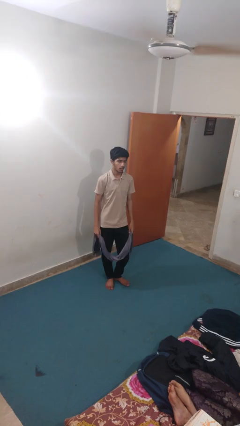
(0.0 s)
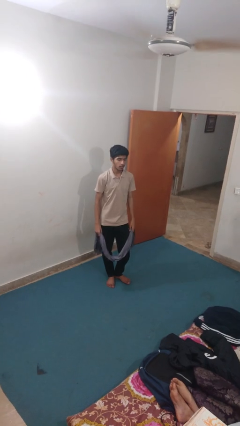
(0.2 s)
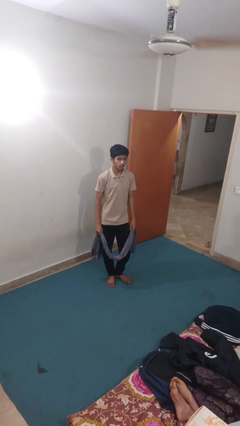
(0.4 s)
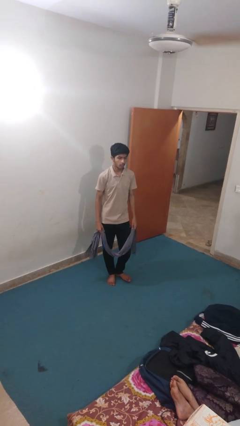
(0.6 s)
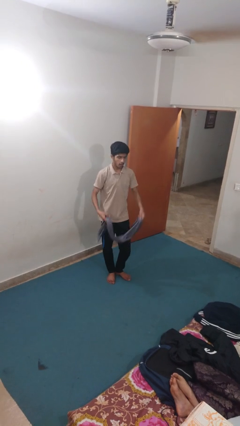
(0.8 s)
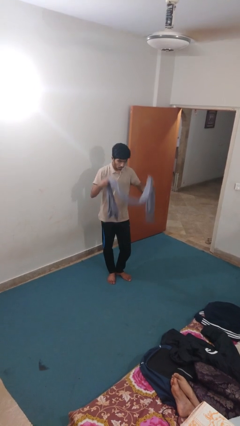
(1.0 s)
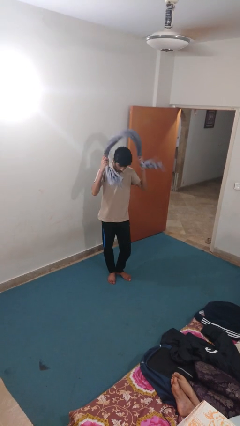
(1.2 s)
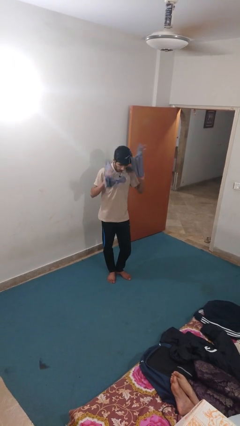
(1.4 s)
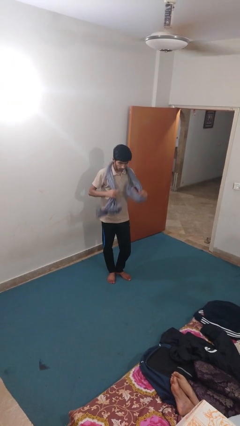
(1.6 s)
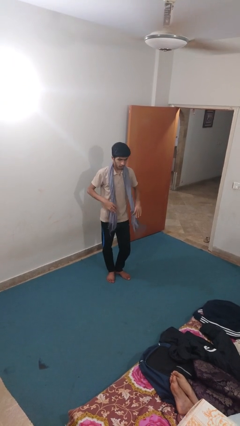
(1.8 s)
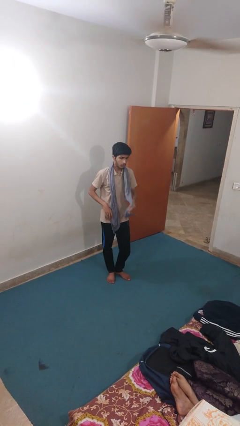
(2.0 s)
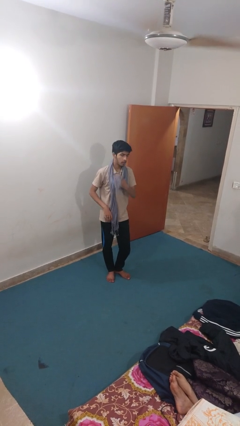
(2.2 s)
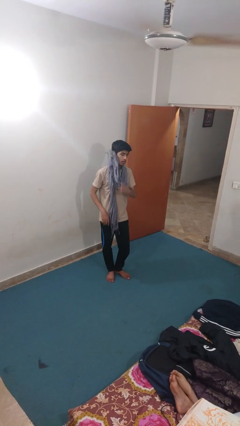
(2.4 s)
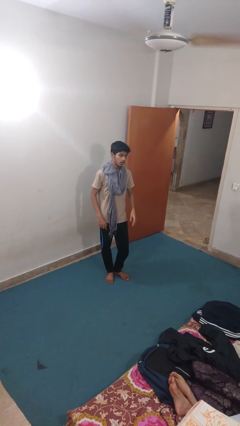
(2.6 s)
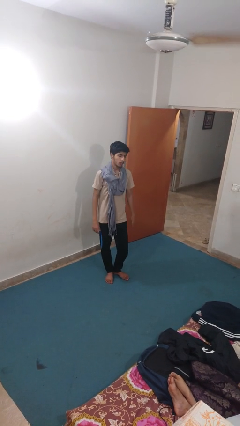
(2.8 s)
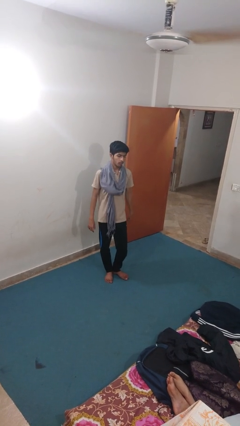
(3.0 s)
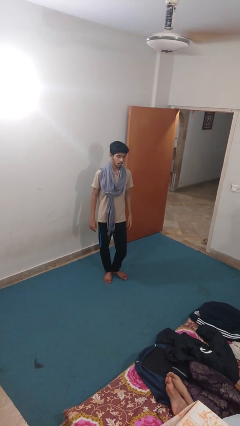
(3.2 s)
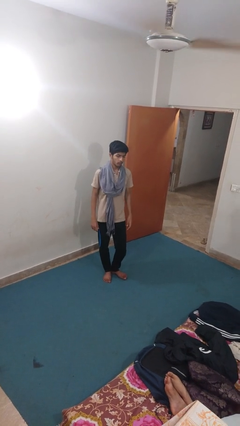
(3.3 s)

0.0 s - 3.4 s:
person puts on scarf

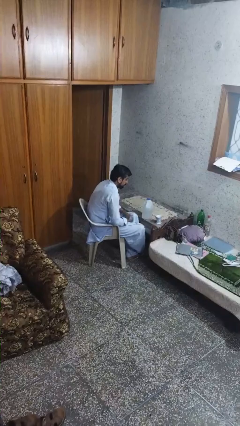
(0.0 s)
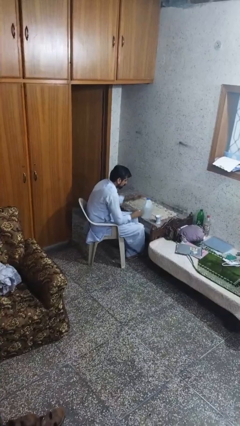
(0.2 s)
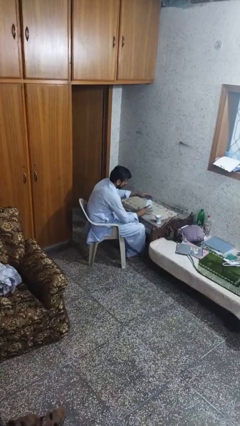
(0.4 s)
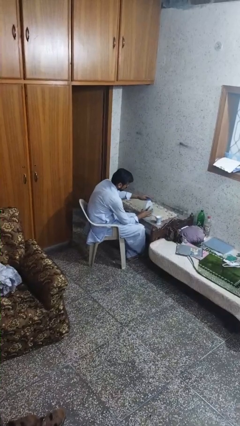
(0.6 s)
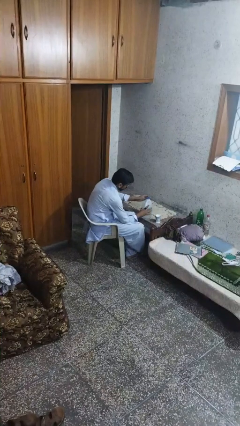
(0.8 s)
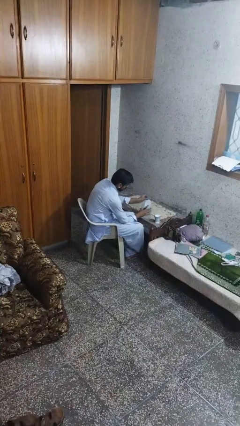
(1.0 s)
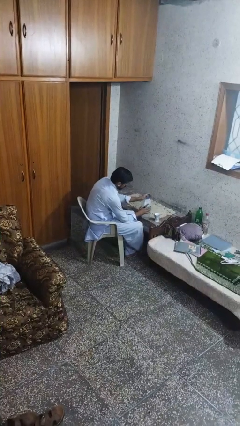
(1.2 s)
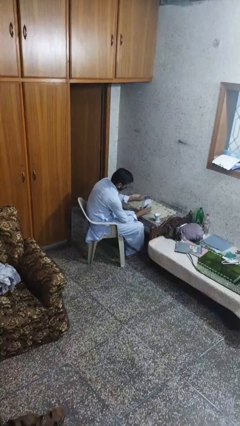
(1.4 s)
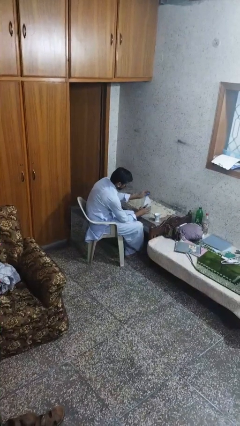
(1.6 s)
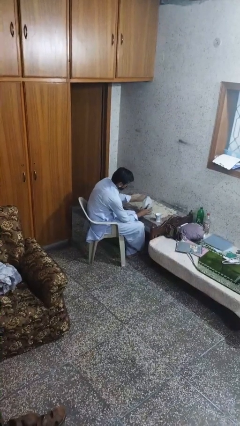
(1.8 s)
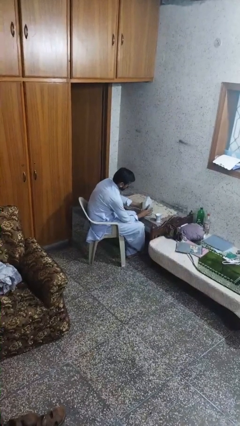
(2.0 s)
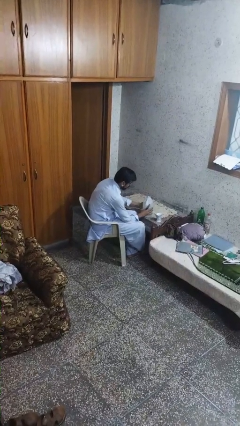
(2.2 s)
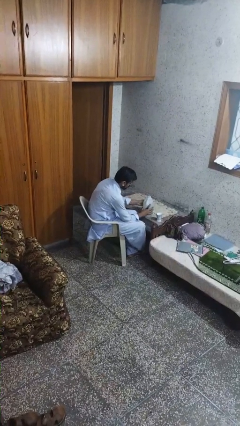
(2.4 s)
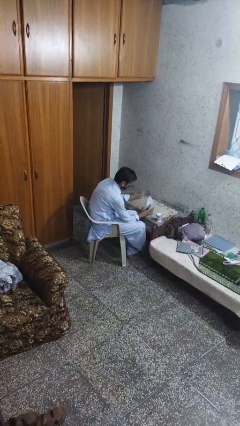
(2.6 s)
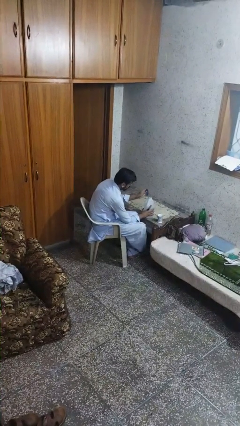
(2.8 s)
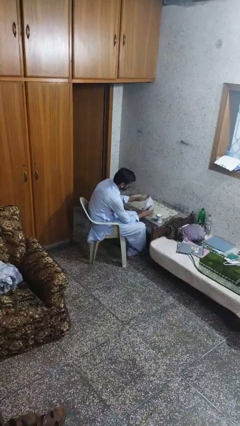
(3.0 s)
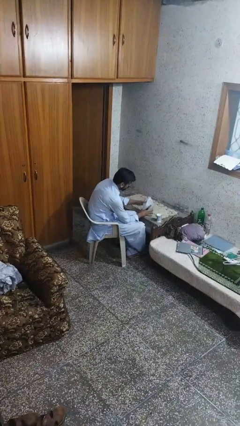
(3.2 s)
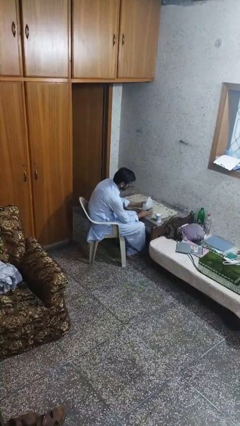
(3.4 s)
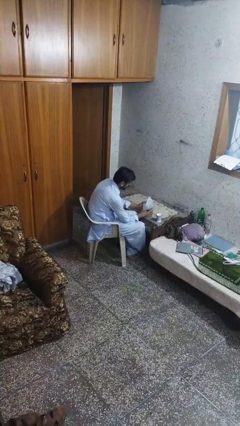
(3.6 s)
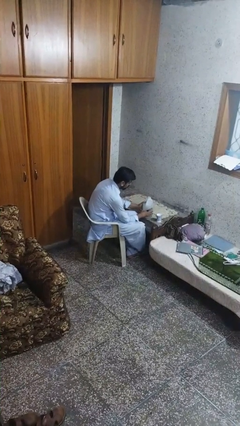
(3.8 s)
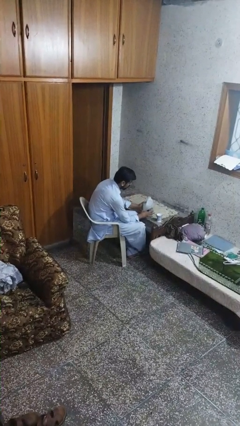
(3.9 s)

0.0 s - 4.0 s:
person unscrews lid from bottle

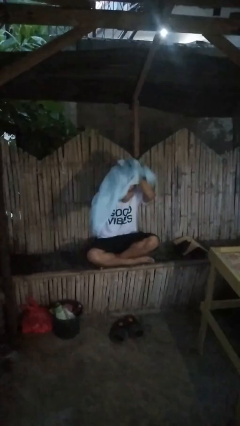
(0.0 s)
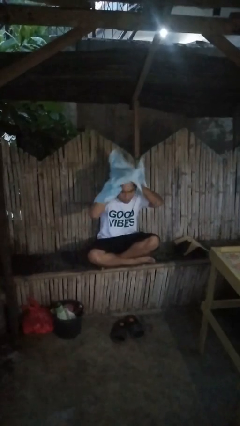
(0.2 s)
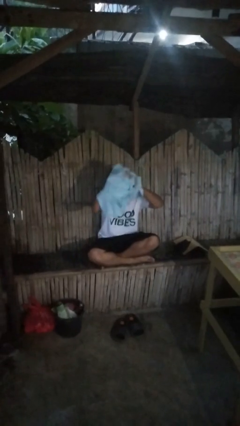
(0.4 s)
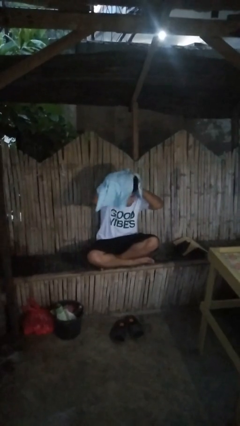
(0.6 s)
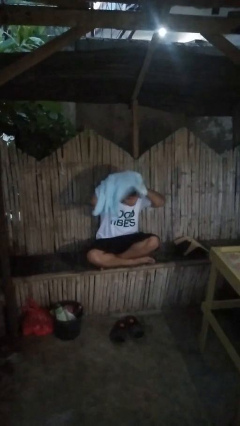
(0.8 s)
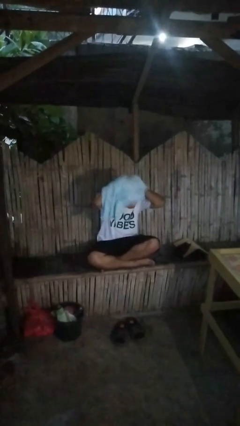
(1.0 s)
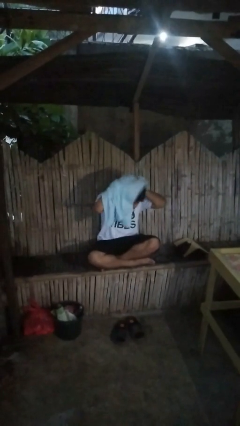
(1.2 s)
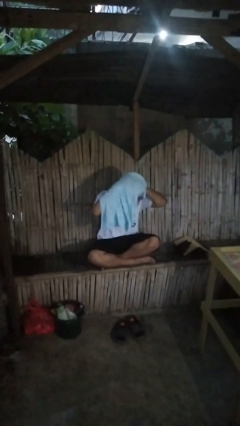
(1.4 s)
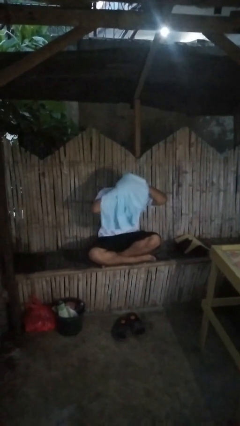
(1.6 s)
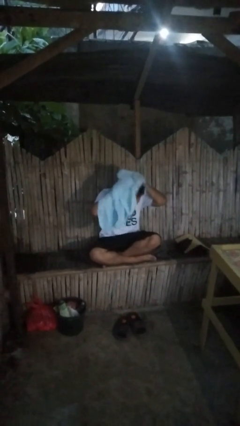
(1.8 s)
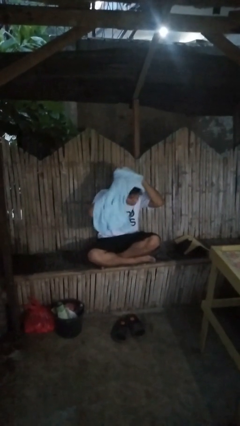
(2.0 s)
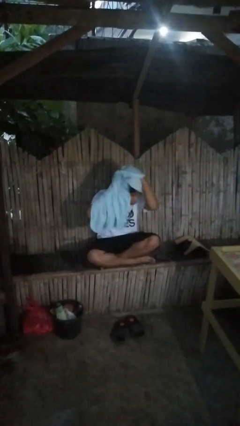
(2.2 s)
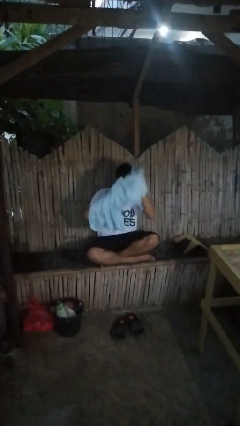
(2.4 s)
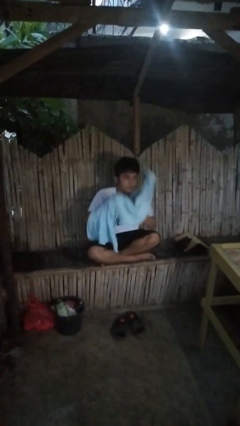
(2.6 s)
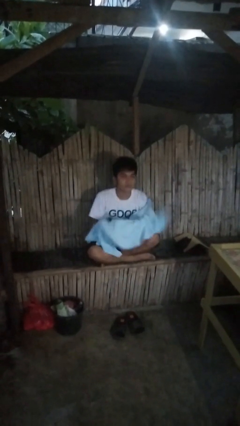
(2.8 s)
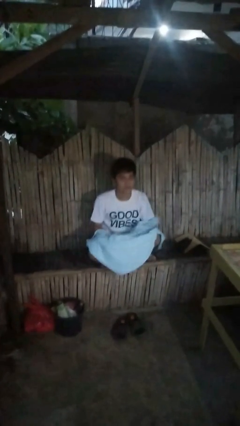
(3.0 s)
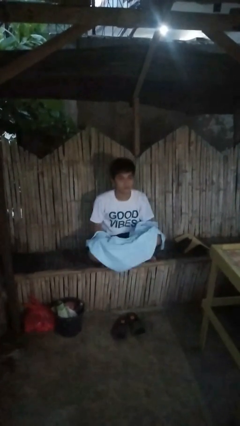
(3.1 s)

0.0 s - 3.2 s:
person dries hair with towel

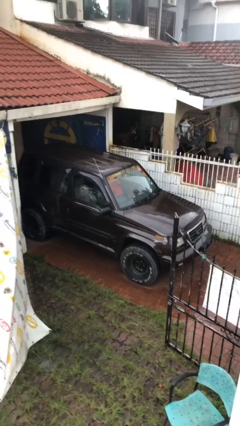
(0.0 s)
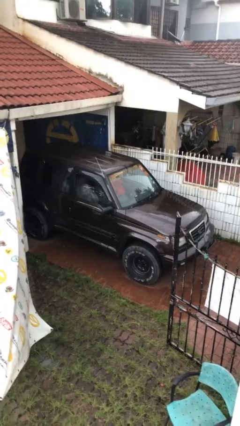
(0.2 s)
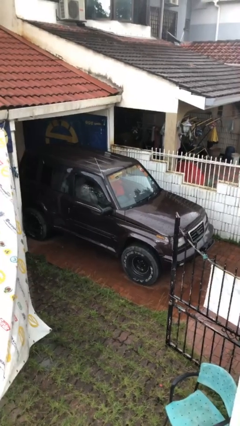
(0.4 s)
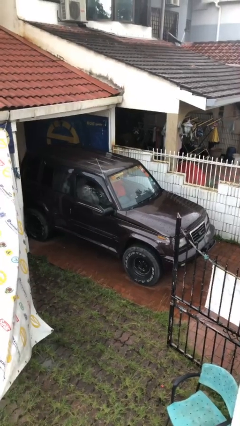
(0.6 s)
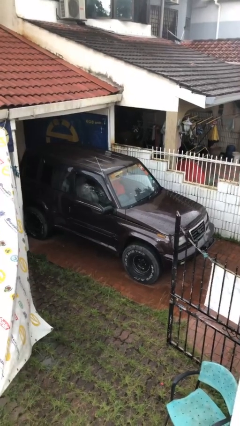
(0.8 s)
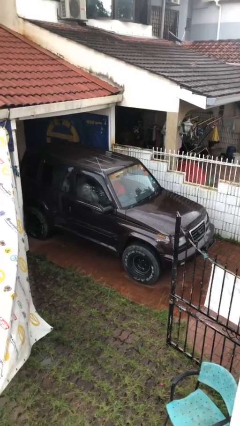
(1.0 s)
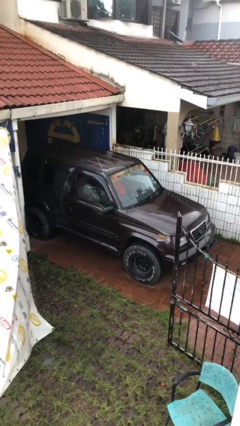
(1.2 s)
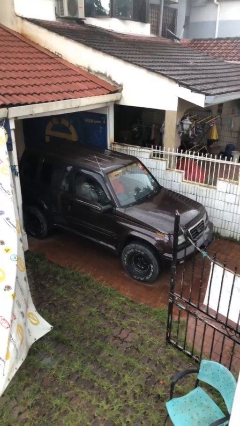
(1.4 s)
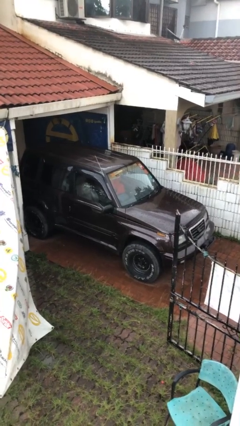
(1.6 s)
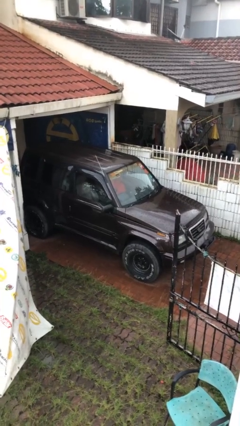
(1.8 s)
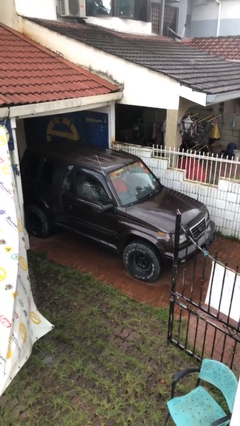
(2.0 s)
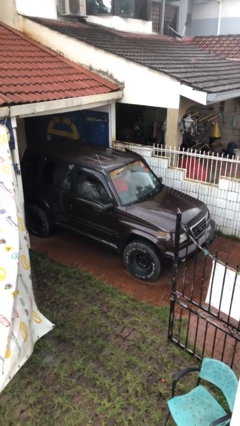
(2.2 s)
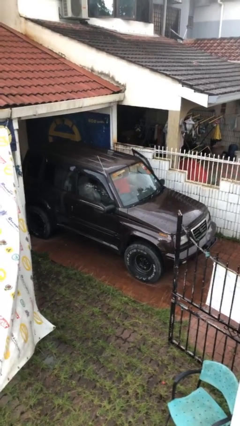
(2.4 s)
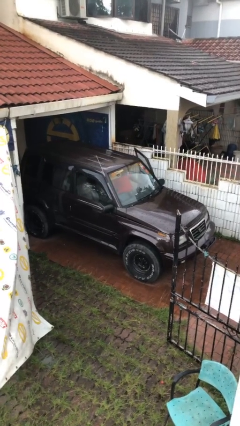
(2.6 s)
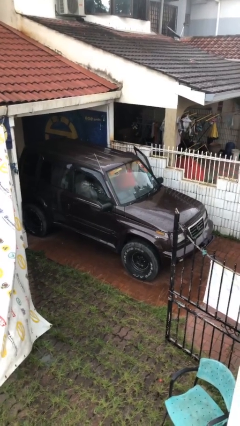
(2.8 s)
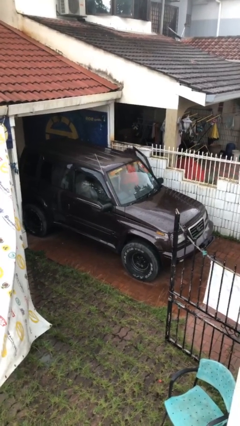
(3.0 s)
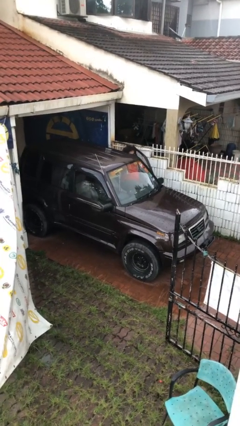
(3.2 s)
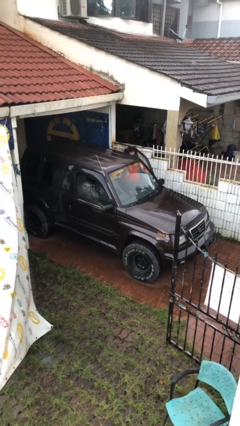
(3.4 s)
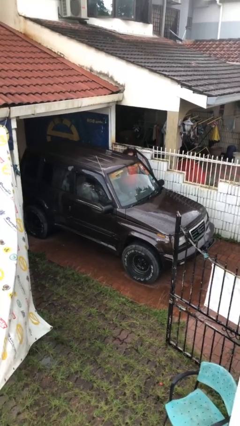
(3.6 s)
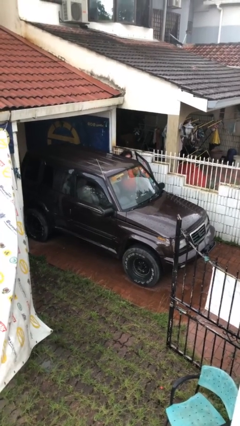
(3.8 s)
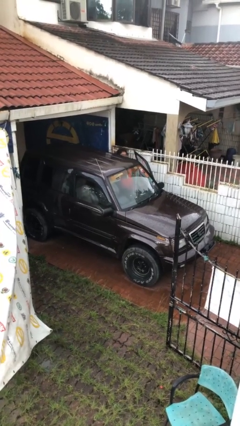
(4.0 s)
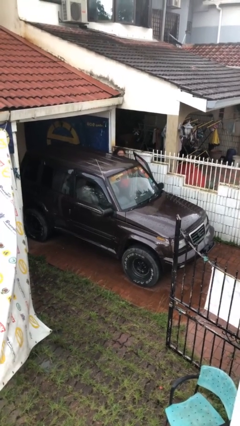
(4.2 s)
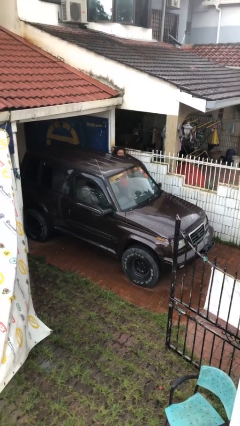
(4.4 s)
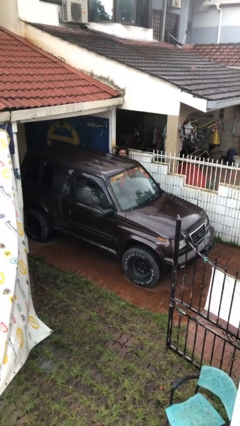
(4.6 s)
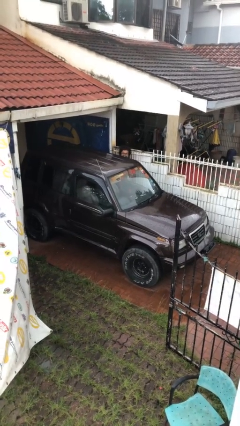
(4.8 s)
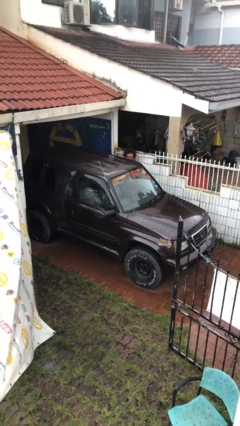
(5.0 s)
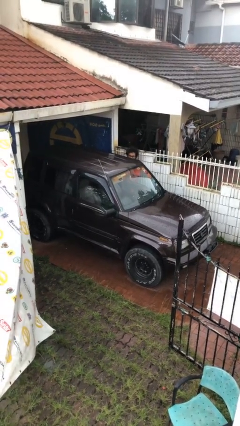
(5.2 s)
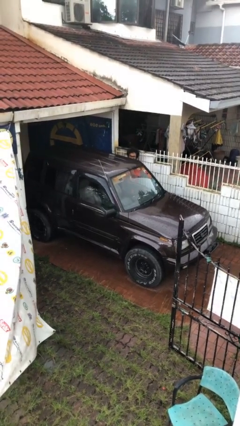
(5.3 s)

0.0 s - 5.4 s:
car drops off person

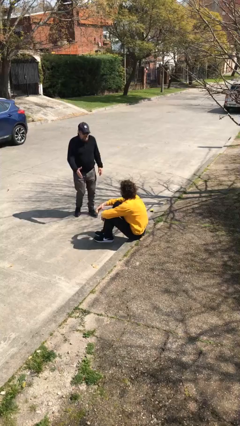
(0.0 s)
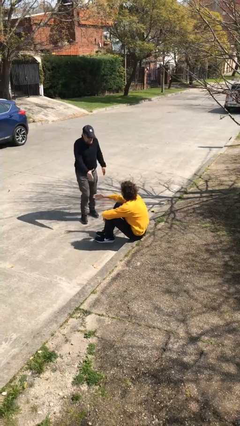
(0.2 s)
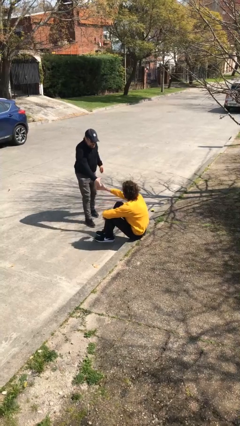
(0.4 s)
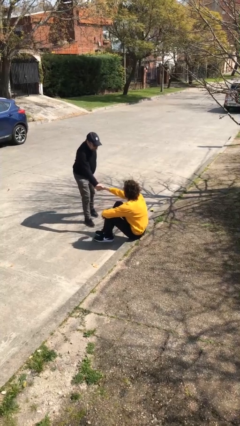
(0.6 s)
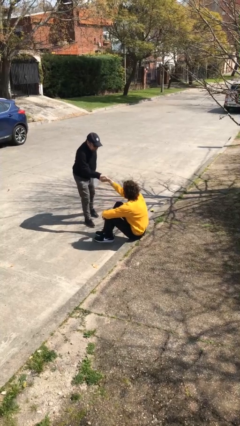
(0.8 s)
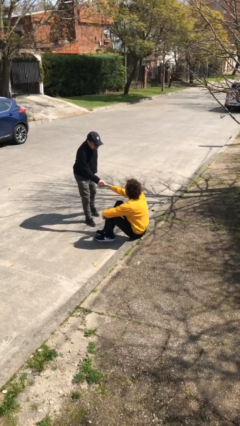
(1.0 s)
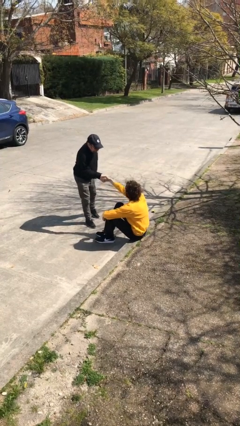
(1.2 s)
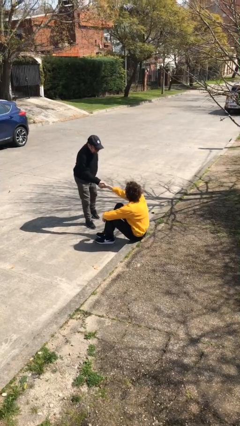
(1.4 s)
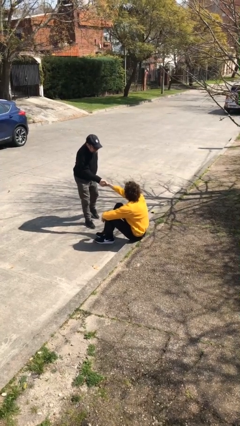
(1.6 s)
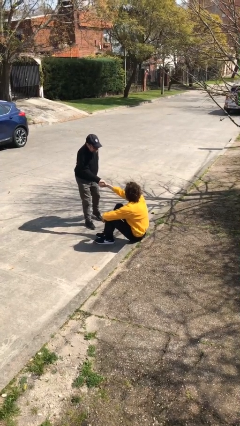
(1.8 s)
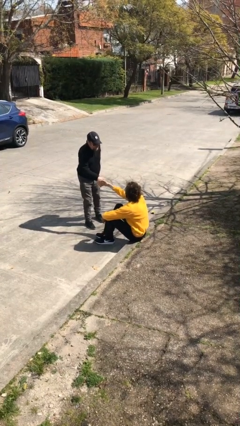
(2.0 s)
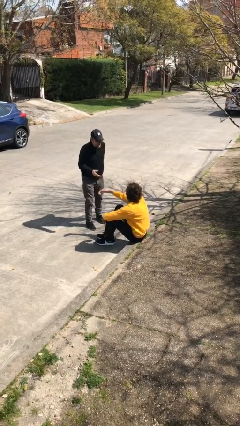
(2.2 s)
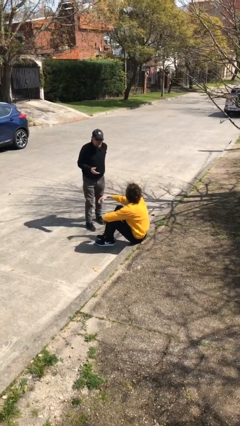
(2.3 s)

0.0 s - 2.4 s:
person shakes hand
